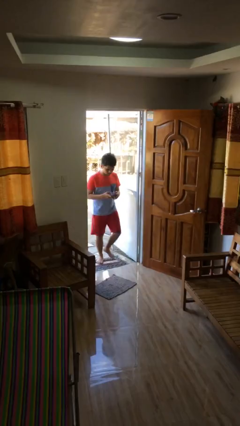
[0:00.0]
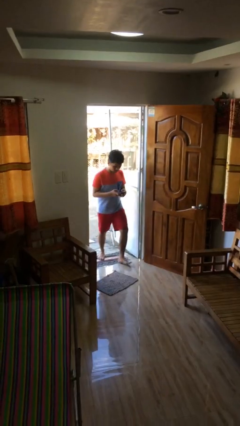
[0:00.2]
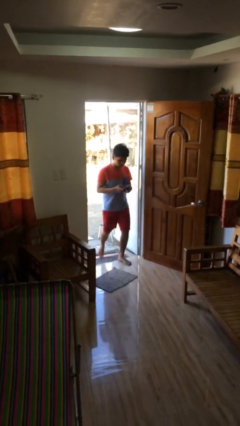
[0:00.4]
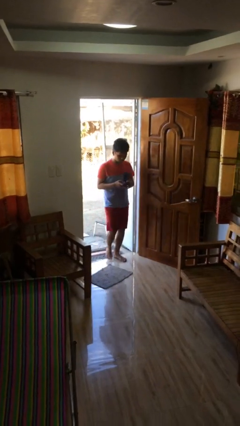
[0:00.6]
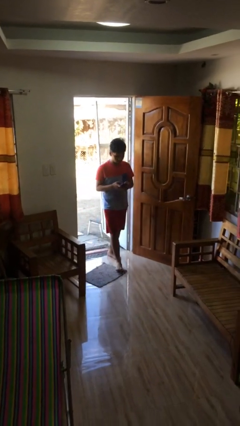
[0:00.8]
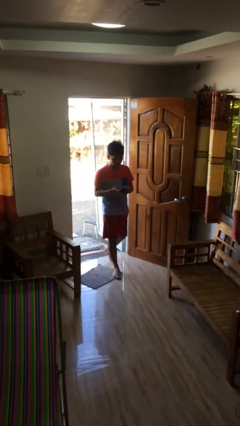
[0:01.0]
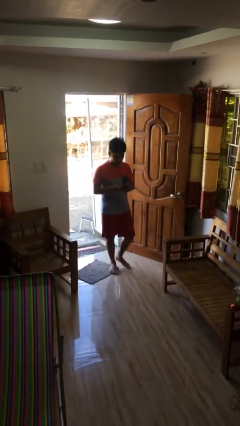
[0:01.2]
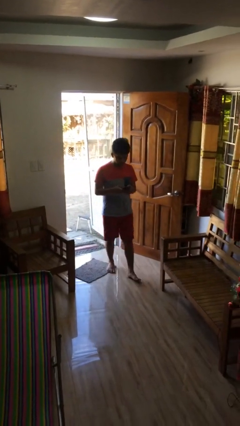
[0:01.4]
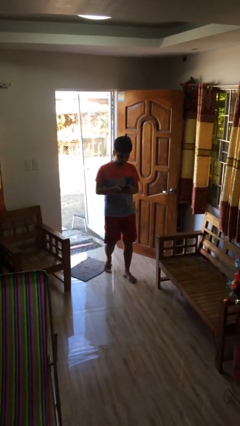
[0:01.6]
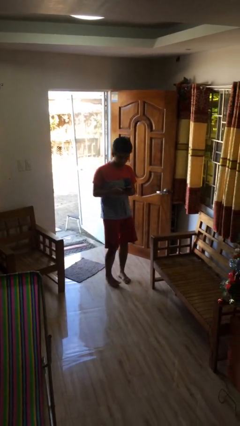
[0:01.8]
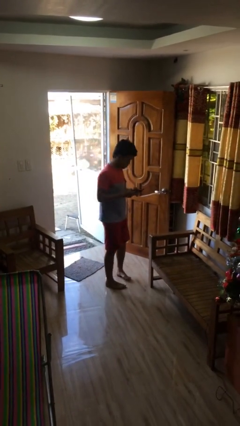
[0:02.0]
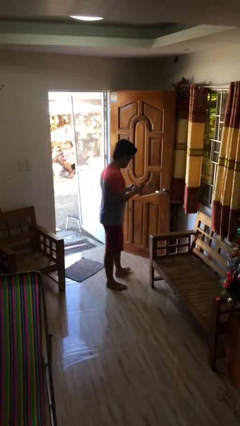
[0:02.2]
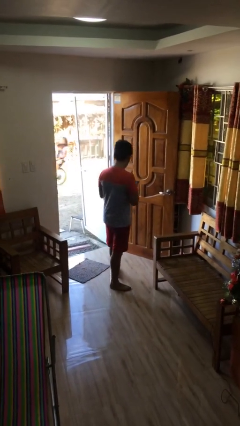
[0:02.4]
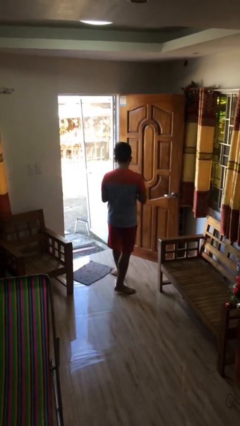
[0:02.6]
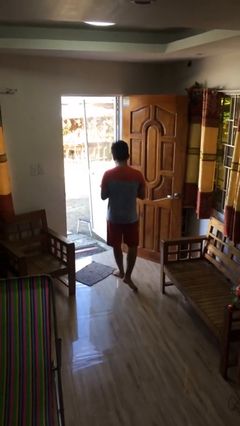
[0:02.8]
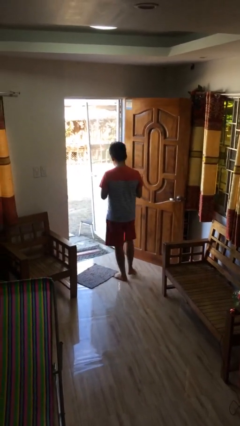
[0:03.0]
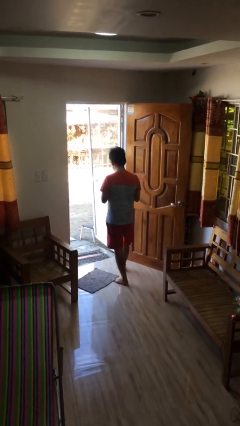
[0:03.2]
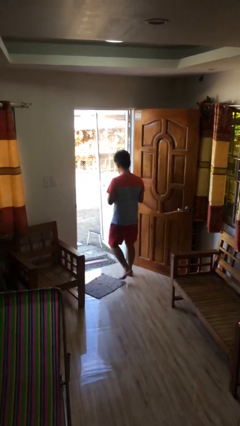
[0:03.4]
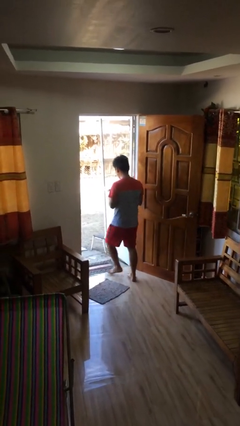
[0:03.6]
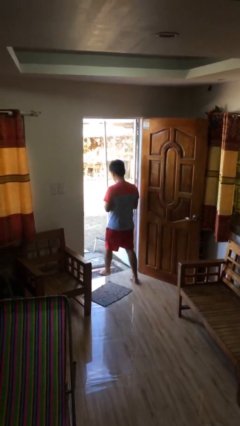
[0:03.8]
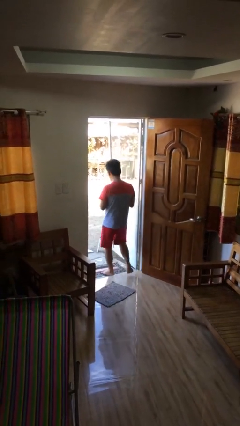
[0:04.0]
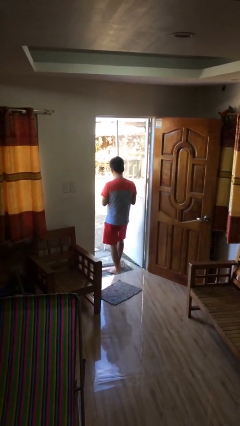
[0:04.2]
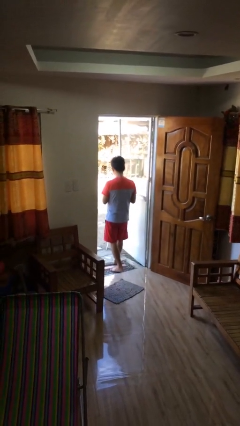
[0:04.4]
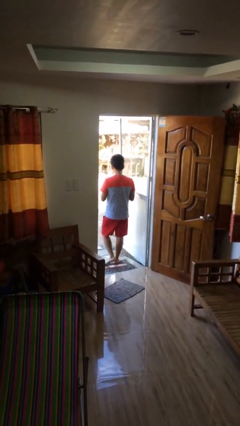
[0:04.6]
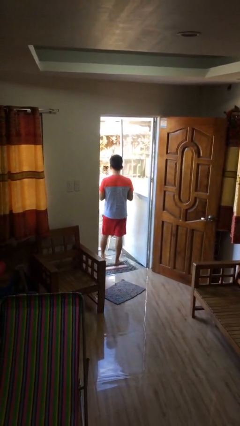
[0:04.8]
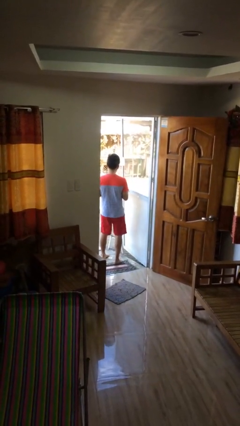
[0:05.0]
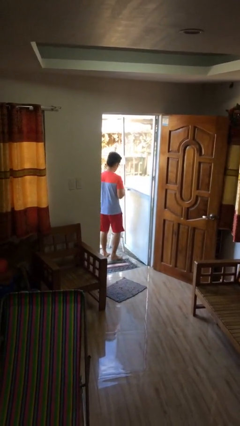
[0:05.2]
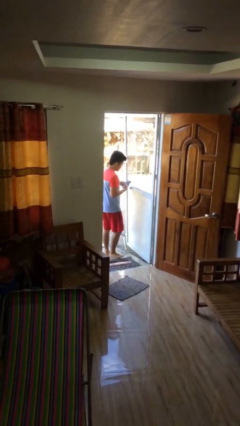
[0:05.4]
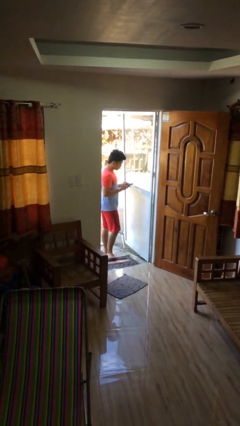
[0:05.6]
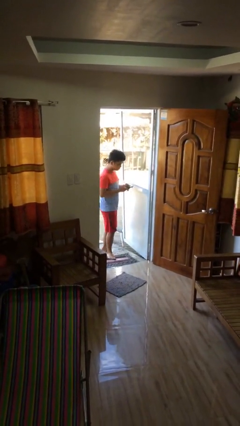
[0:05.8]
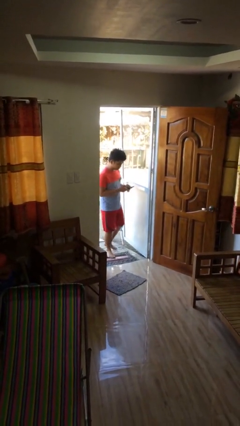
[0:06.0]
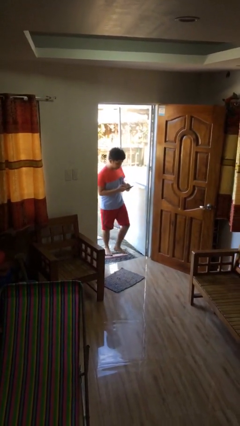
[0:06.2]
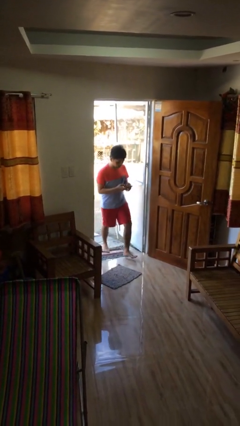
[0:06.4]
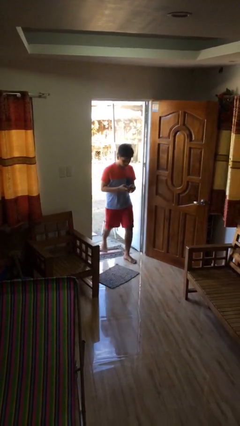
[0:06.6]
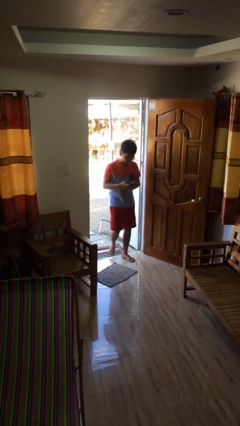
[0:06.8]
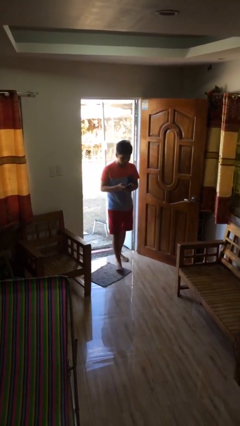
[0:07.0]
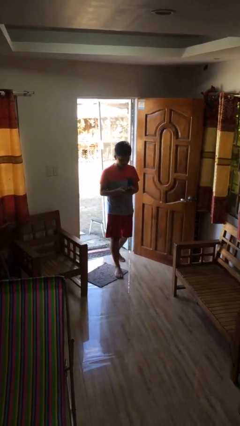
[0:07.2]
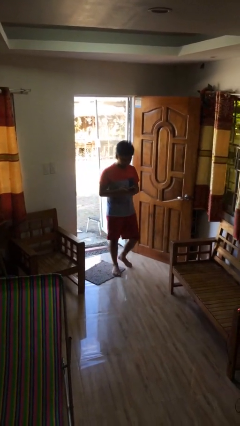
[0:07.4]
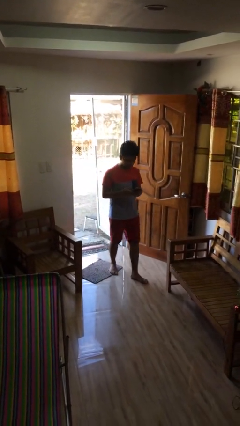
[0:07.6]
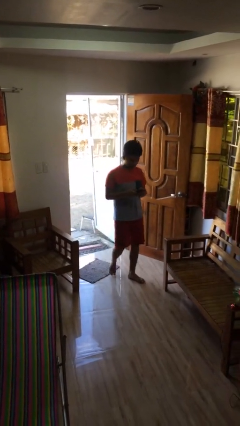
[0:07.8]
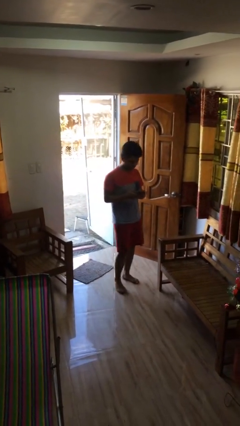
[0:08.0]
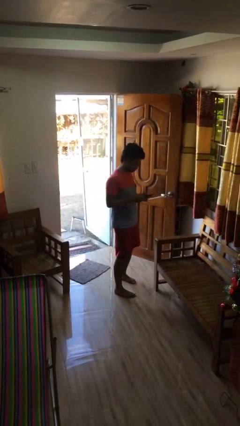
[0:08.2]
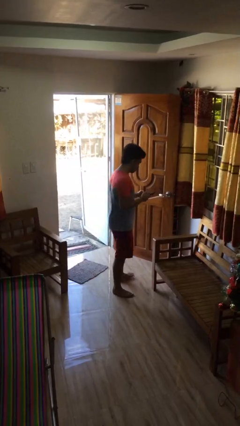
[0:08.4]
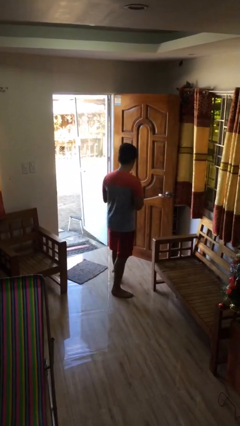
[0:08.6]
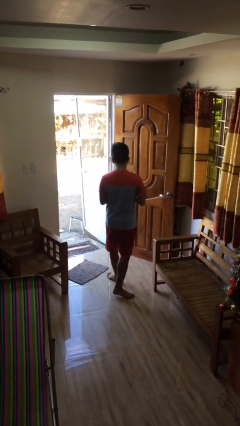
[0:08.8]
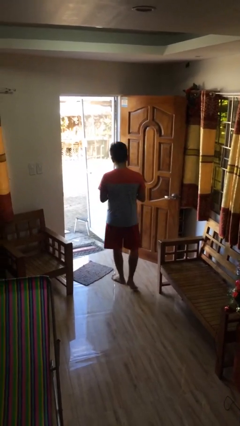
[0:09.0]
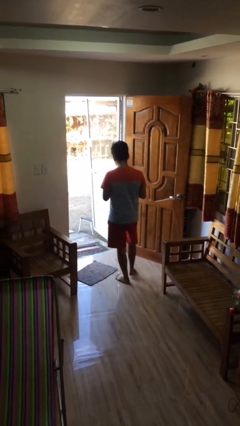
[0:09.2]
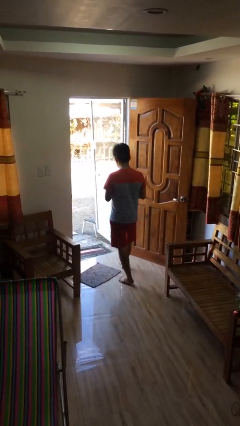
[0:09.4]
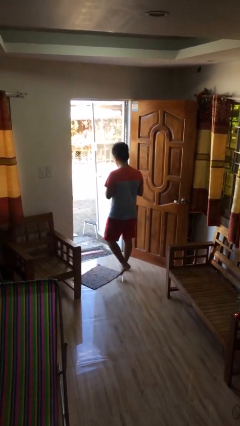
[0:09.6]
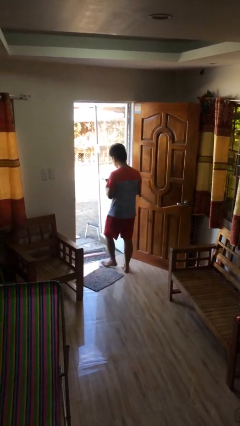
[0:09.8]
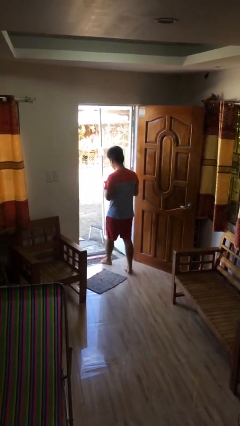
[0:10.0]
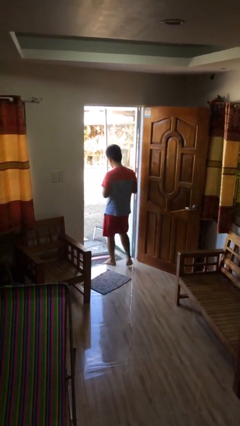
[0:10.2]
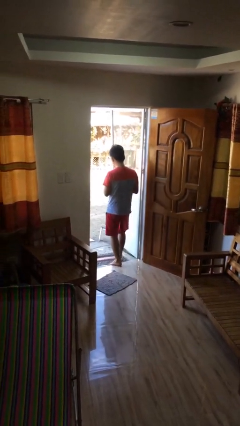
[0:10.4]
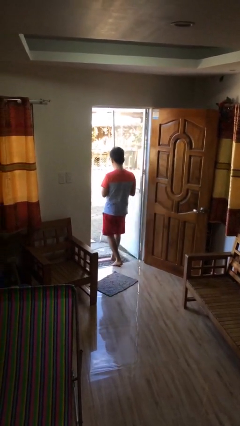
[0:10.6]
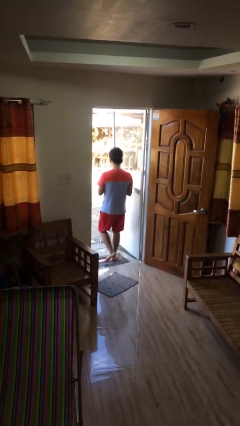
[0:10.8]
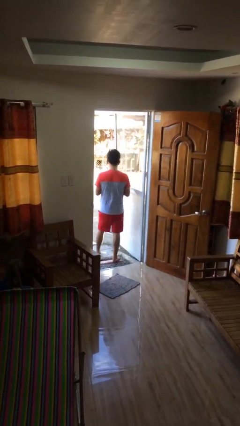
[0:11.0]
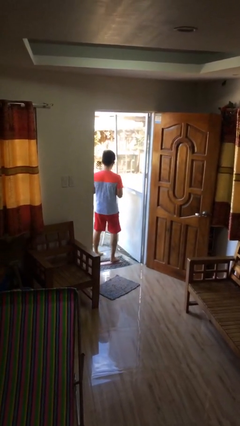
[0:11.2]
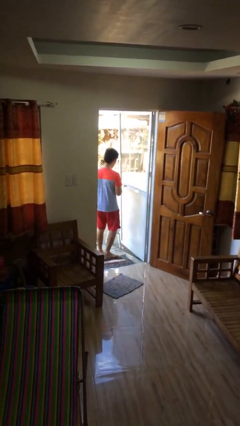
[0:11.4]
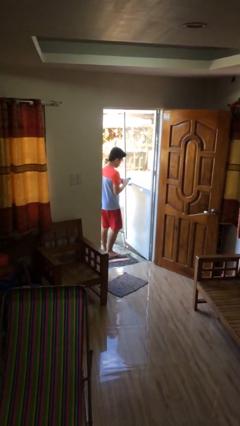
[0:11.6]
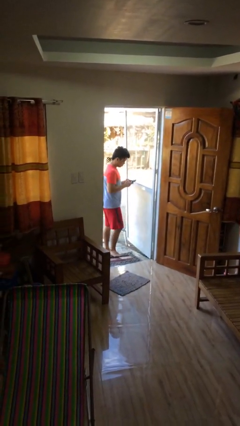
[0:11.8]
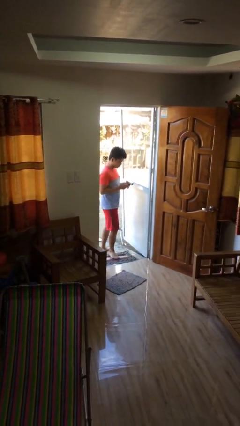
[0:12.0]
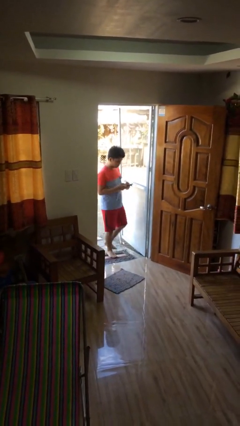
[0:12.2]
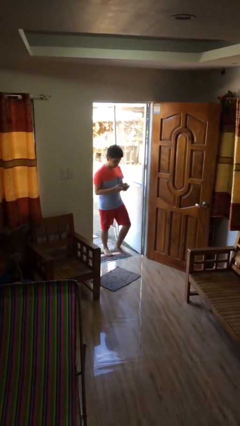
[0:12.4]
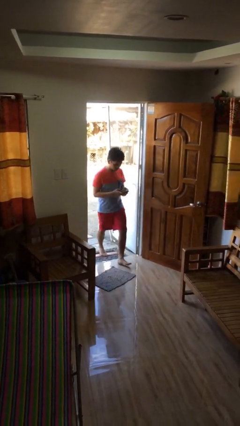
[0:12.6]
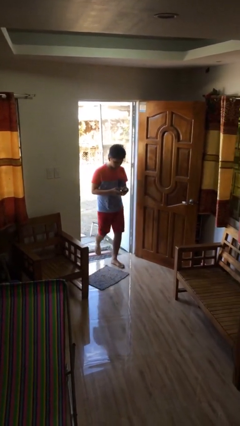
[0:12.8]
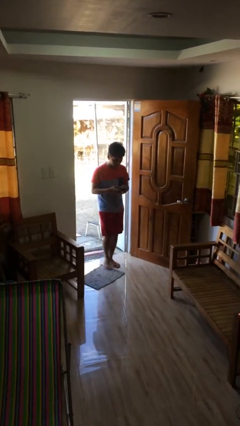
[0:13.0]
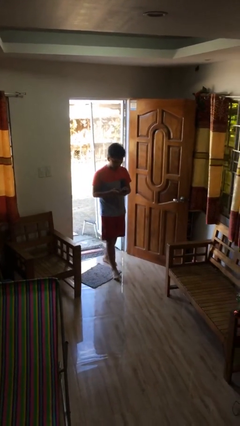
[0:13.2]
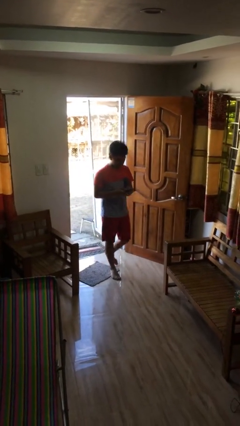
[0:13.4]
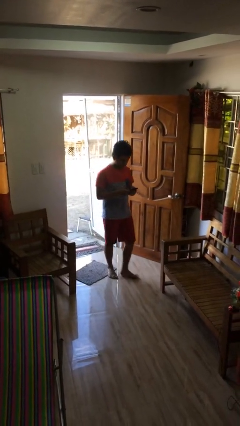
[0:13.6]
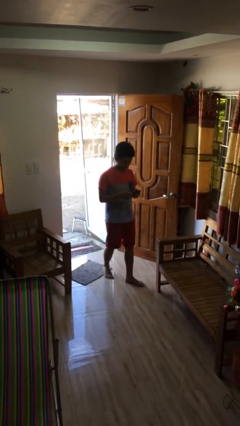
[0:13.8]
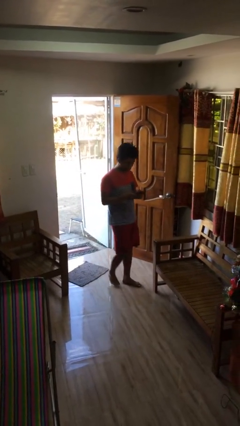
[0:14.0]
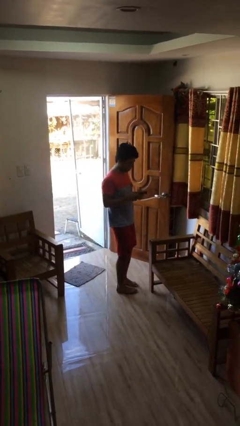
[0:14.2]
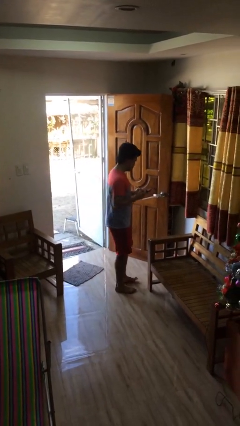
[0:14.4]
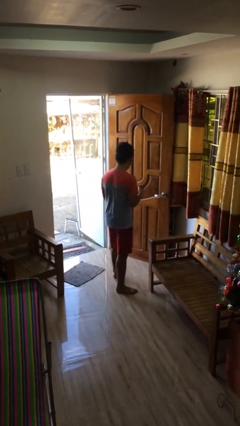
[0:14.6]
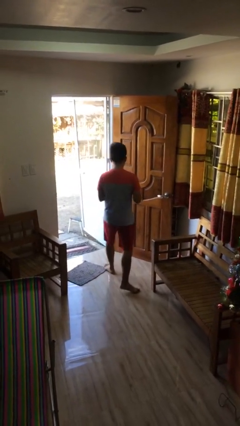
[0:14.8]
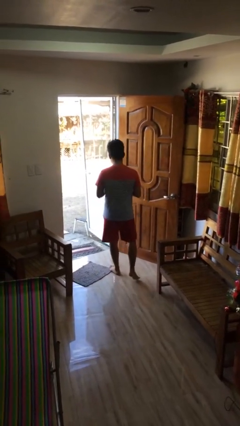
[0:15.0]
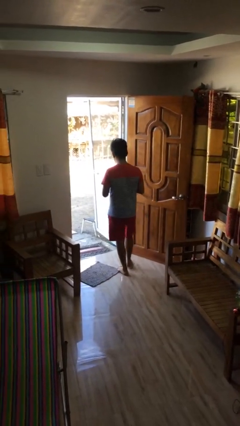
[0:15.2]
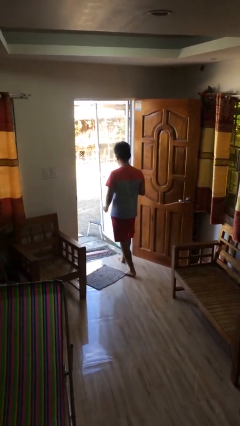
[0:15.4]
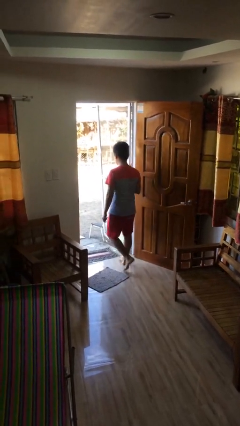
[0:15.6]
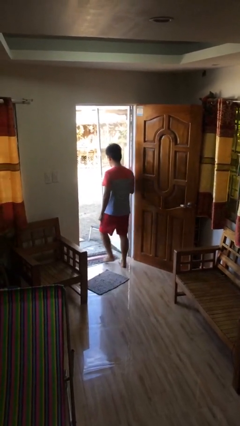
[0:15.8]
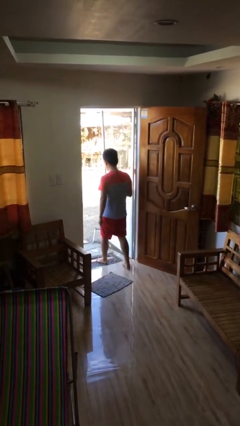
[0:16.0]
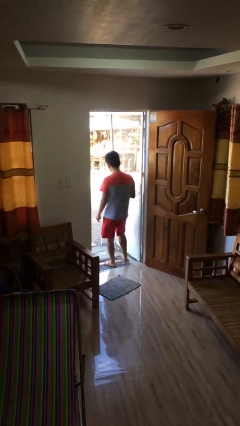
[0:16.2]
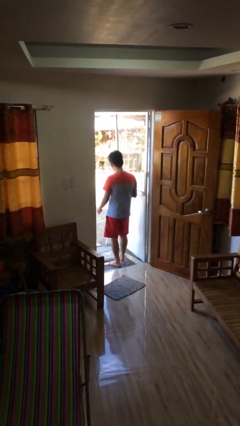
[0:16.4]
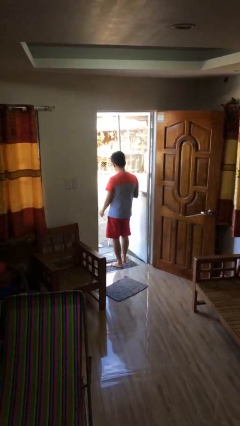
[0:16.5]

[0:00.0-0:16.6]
person texts on phone

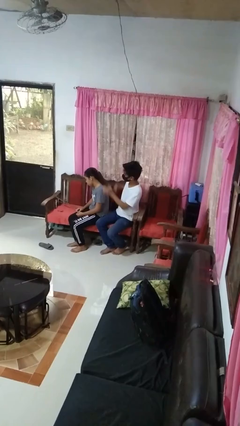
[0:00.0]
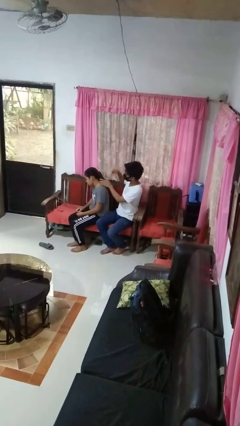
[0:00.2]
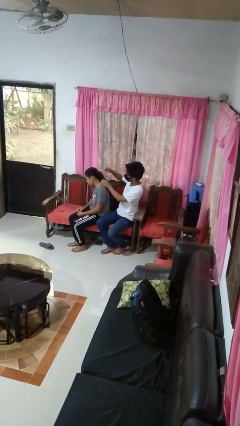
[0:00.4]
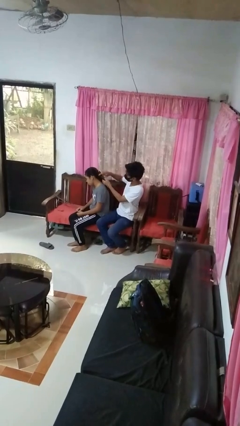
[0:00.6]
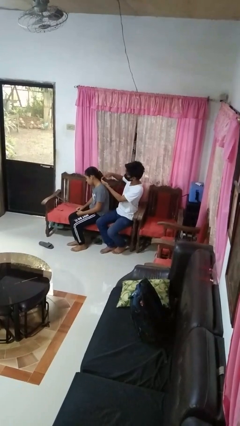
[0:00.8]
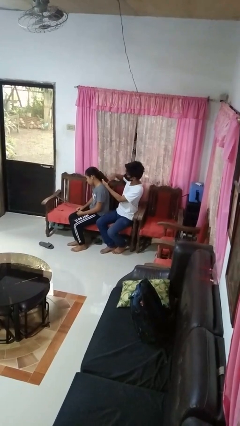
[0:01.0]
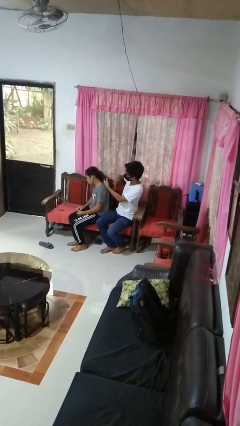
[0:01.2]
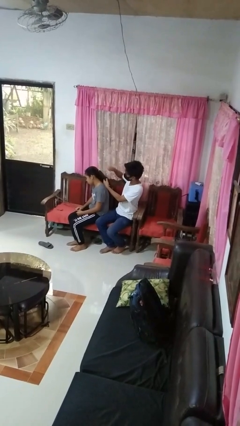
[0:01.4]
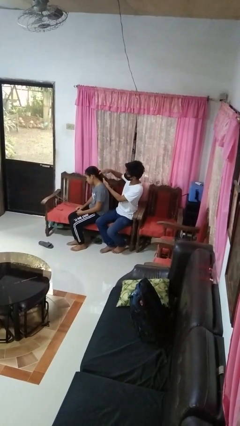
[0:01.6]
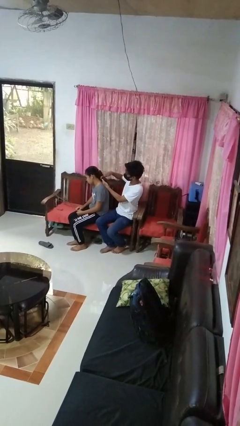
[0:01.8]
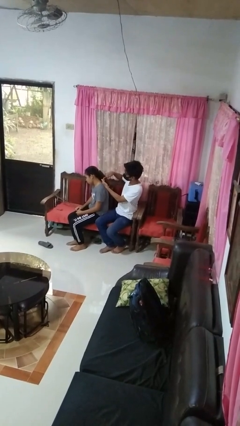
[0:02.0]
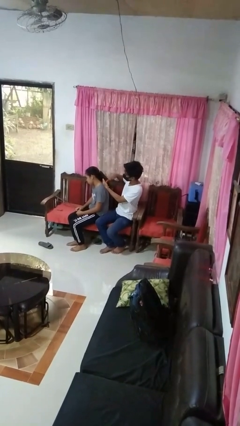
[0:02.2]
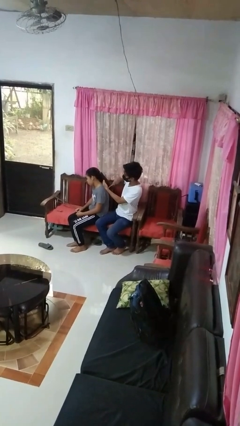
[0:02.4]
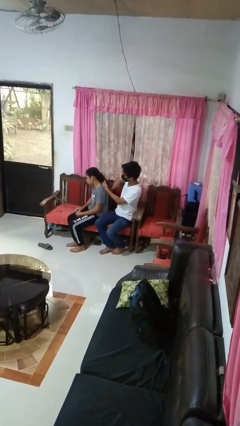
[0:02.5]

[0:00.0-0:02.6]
person brushes hair of person
